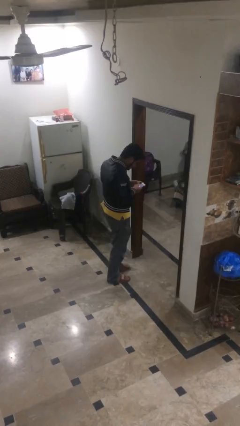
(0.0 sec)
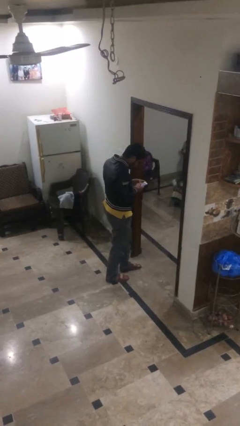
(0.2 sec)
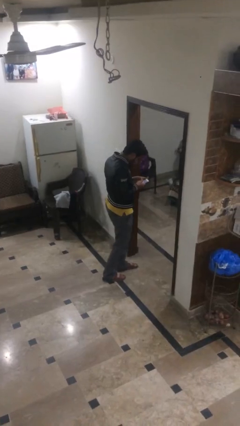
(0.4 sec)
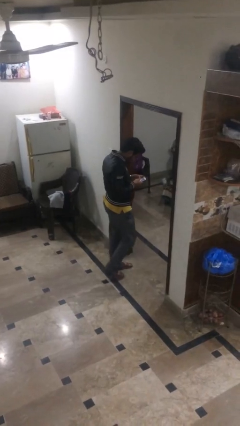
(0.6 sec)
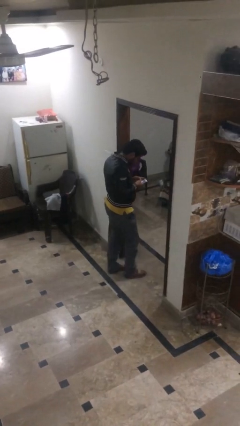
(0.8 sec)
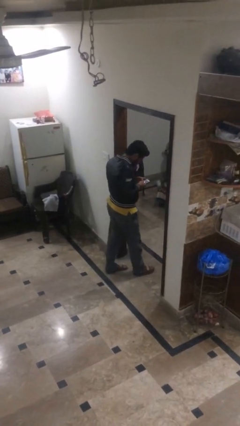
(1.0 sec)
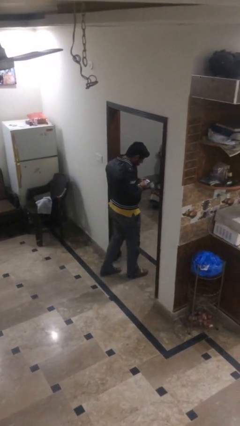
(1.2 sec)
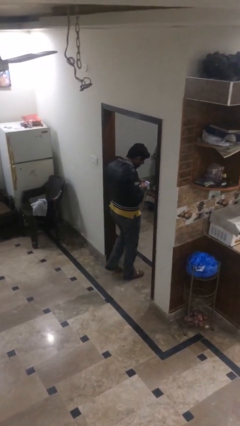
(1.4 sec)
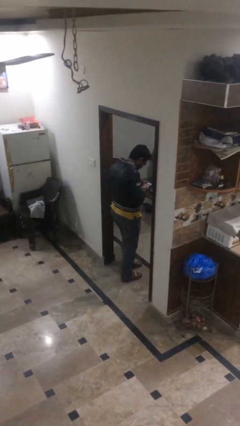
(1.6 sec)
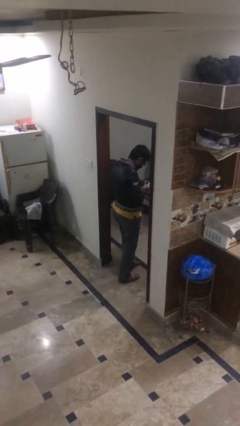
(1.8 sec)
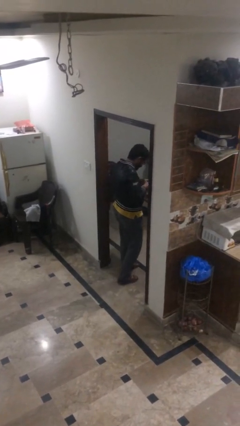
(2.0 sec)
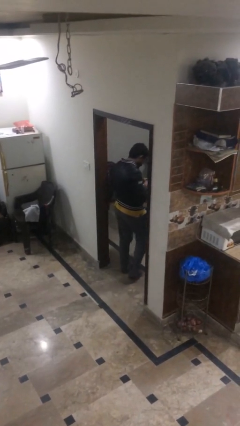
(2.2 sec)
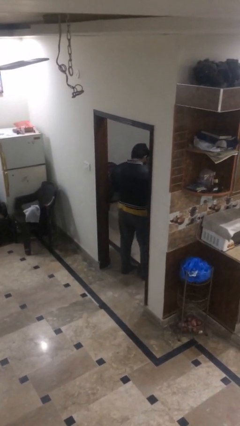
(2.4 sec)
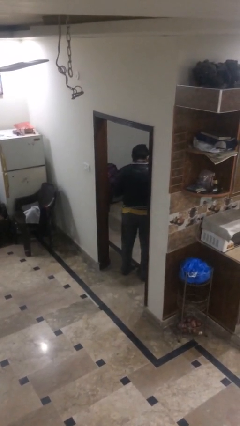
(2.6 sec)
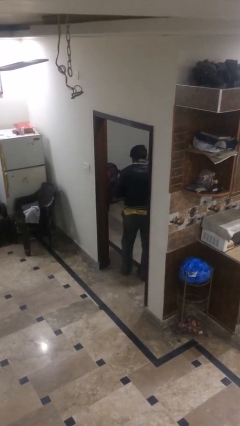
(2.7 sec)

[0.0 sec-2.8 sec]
person enters scene through structure

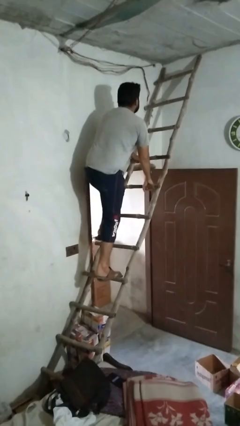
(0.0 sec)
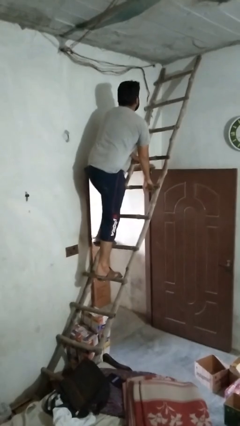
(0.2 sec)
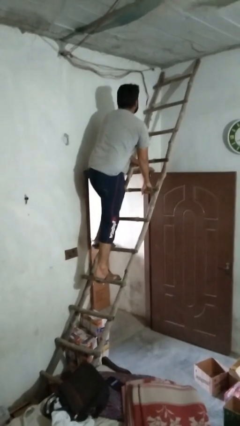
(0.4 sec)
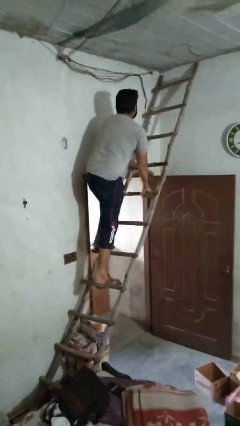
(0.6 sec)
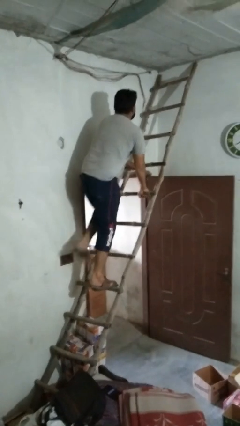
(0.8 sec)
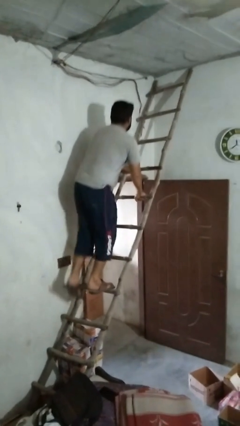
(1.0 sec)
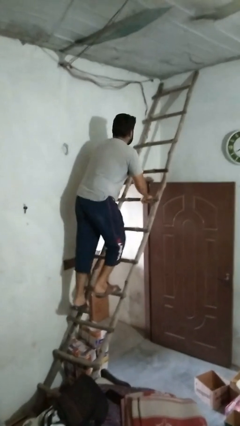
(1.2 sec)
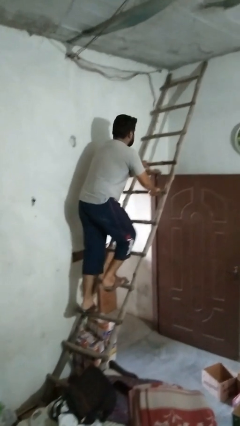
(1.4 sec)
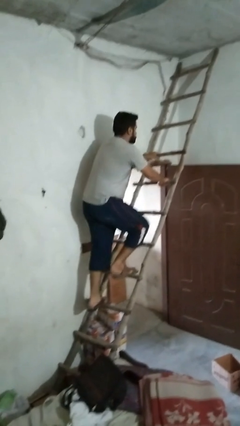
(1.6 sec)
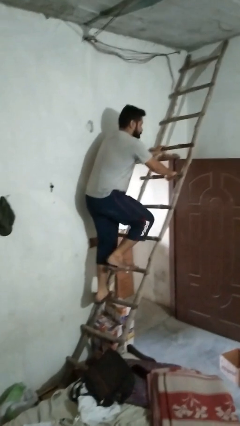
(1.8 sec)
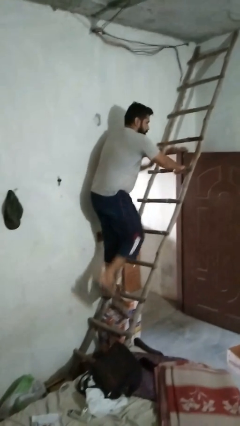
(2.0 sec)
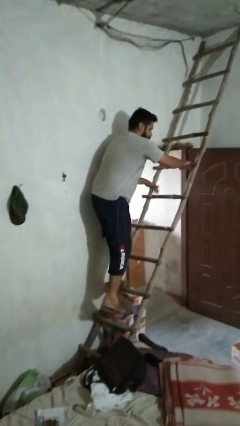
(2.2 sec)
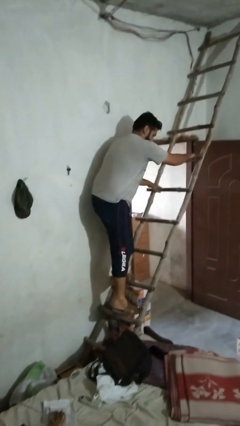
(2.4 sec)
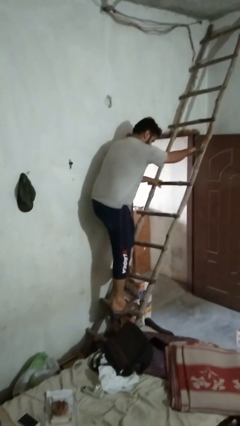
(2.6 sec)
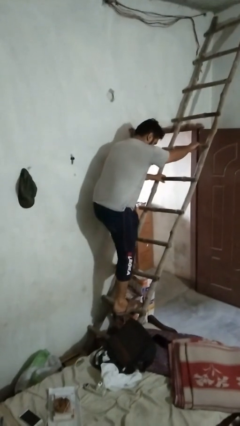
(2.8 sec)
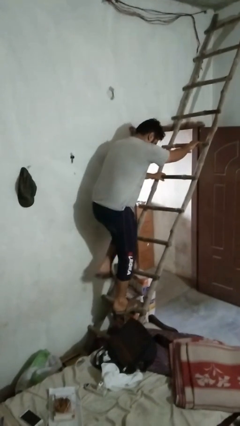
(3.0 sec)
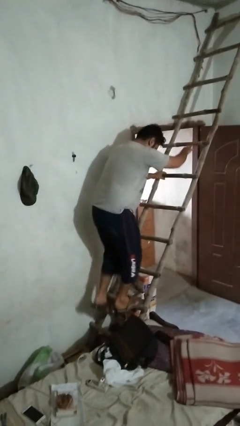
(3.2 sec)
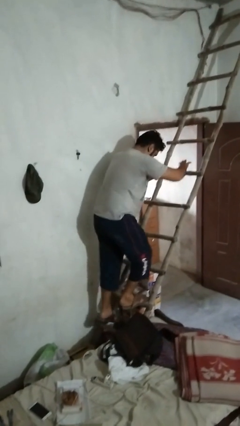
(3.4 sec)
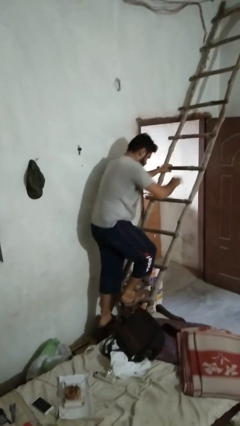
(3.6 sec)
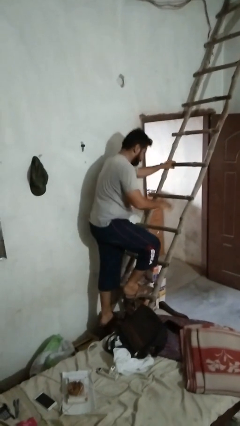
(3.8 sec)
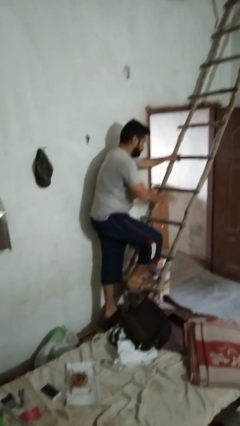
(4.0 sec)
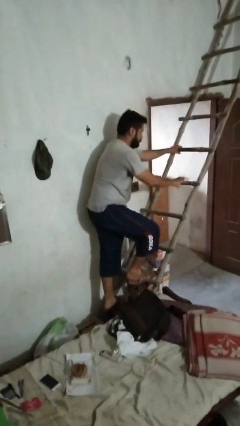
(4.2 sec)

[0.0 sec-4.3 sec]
person climbs down ladder

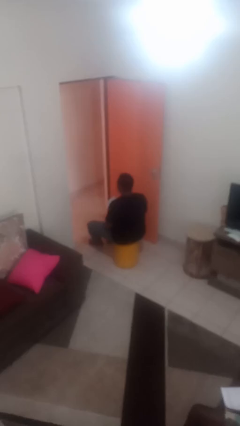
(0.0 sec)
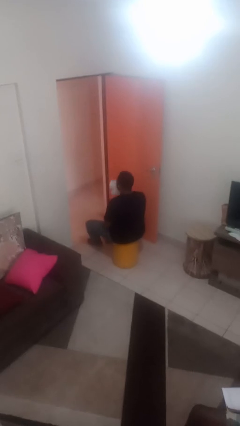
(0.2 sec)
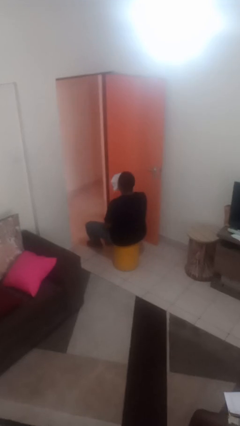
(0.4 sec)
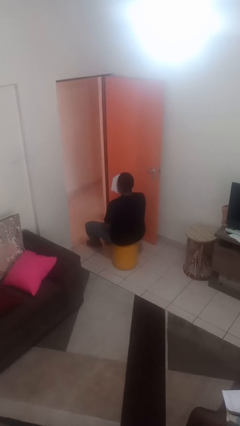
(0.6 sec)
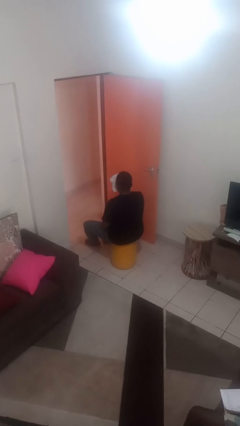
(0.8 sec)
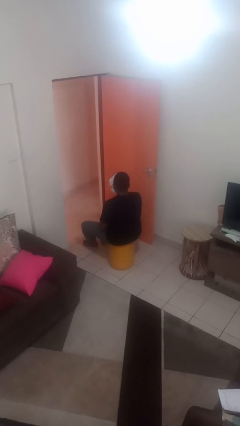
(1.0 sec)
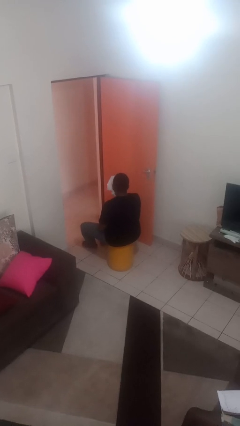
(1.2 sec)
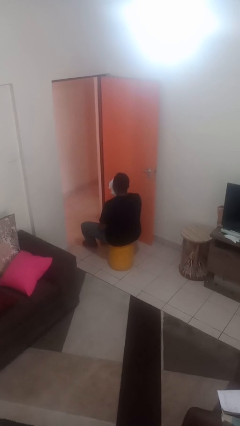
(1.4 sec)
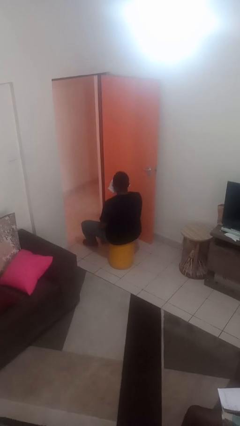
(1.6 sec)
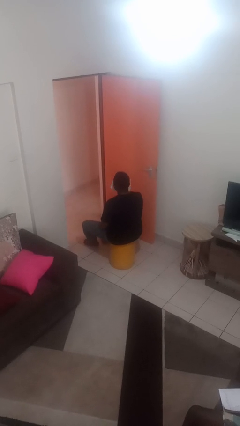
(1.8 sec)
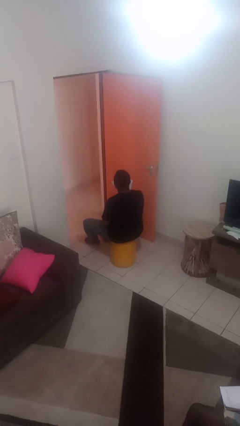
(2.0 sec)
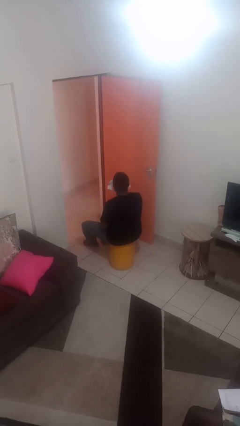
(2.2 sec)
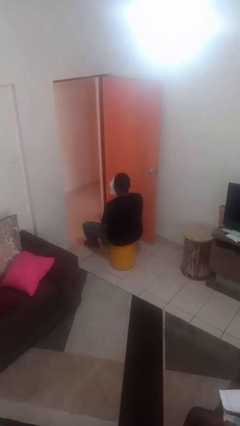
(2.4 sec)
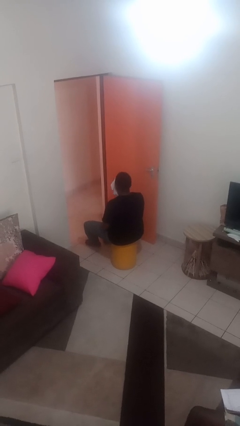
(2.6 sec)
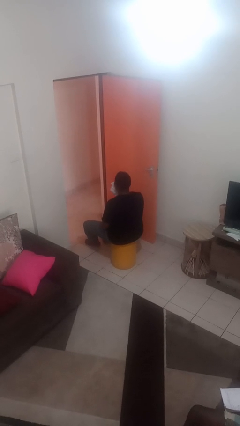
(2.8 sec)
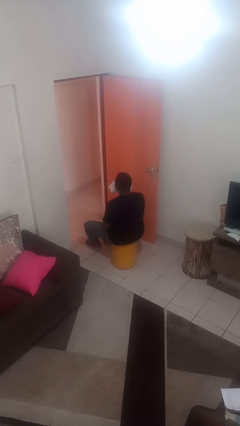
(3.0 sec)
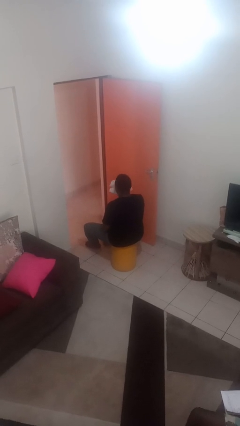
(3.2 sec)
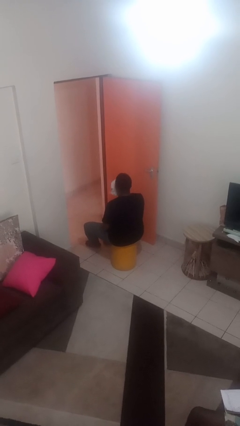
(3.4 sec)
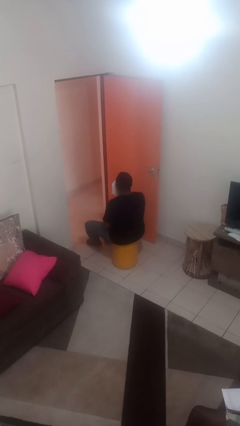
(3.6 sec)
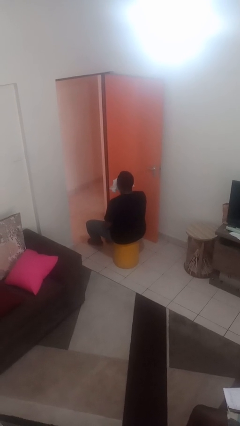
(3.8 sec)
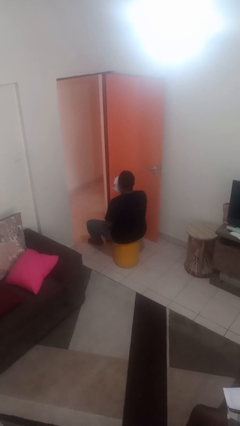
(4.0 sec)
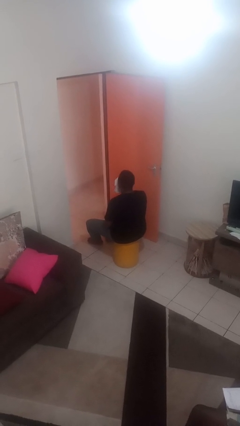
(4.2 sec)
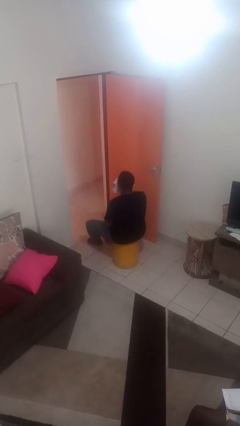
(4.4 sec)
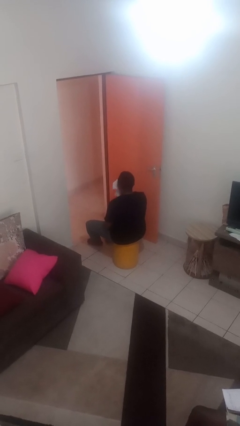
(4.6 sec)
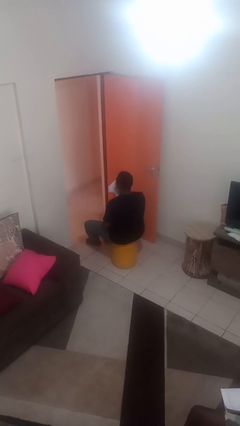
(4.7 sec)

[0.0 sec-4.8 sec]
person wipes mouth with napkin

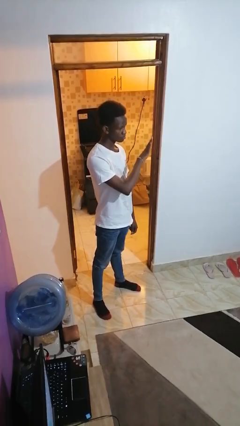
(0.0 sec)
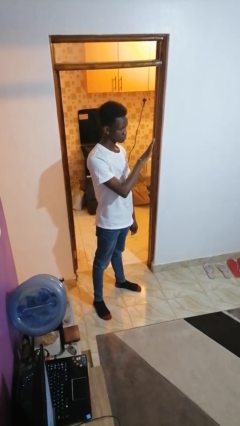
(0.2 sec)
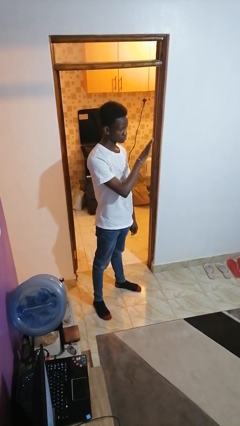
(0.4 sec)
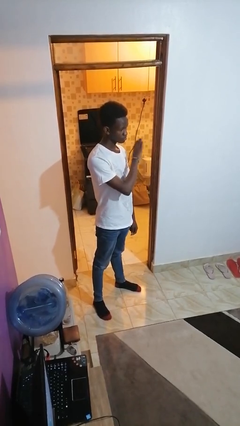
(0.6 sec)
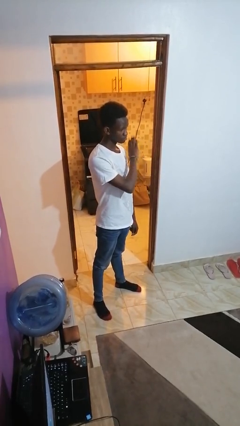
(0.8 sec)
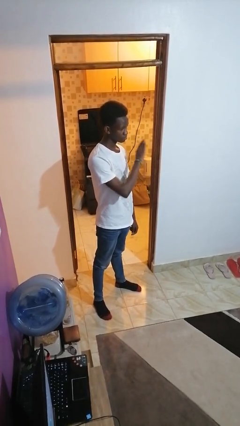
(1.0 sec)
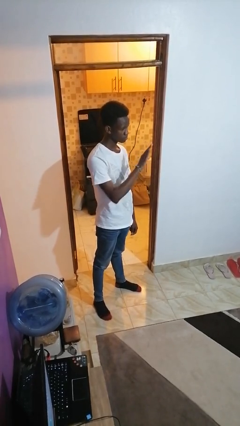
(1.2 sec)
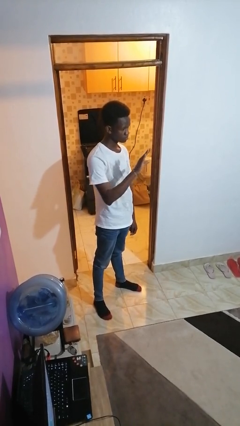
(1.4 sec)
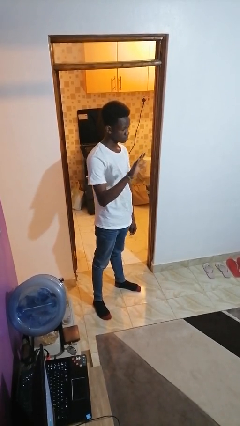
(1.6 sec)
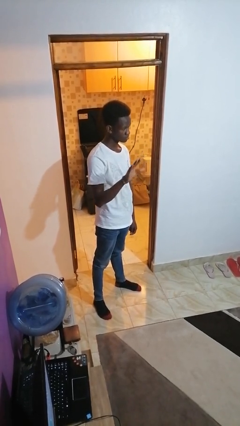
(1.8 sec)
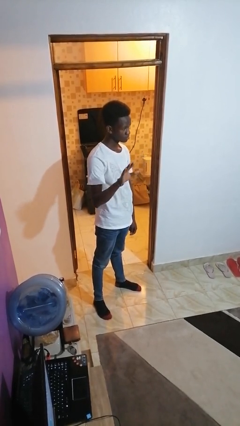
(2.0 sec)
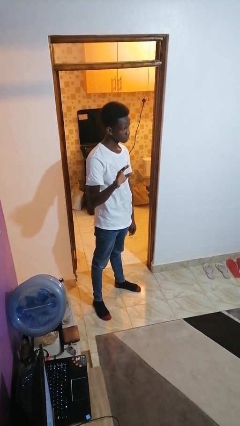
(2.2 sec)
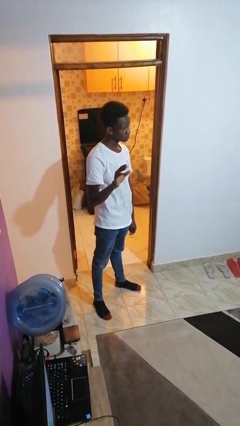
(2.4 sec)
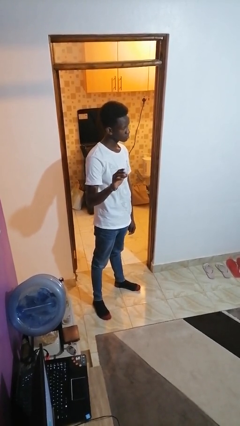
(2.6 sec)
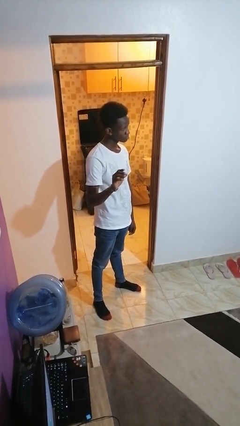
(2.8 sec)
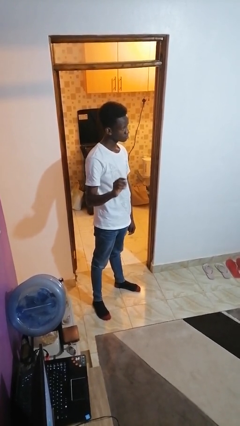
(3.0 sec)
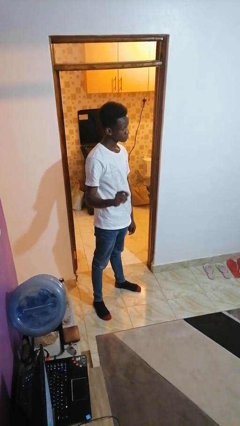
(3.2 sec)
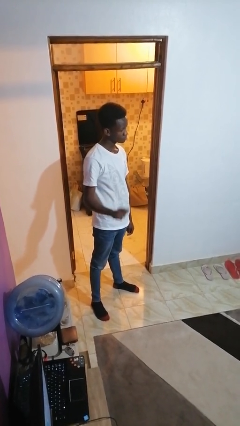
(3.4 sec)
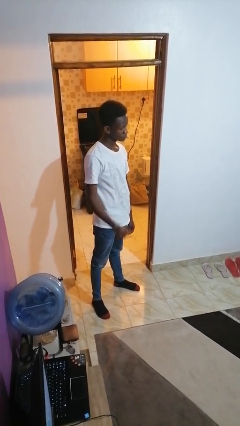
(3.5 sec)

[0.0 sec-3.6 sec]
person gestures swipe right

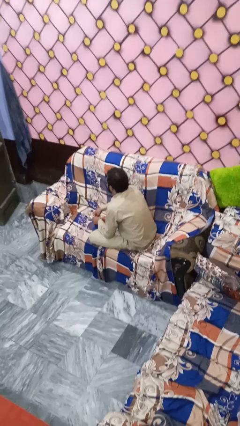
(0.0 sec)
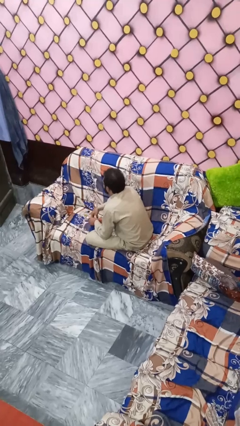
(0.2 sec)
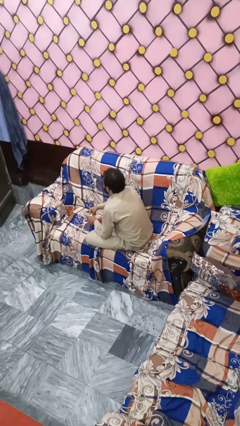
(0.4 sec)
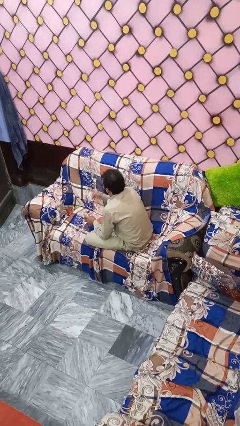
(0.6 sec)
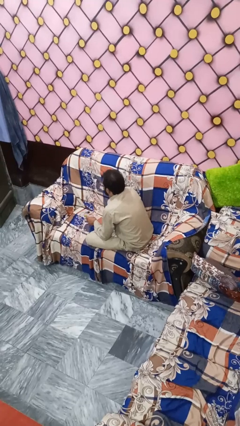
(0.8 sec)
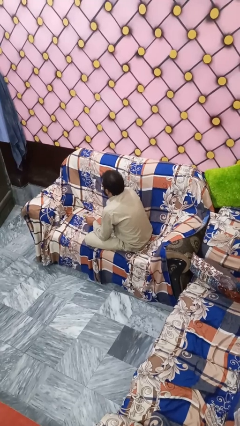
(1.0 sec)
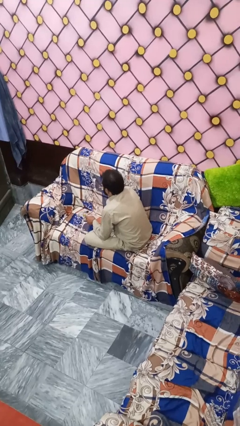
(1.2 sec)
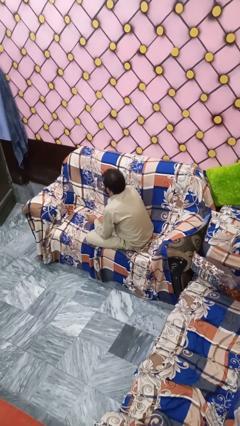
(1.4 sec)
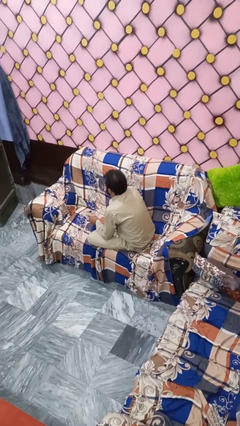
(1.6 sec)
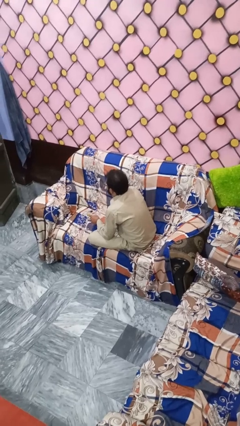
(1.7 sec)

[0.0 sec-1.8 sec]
person blows nose
